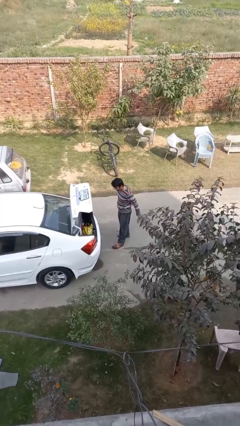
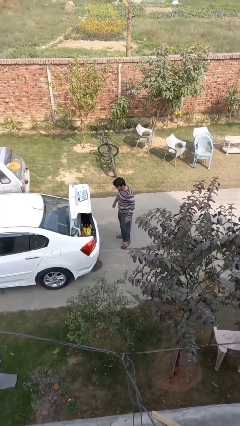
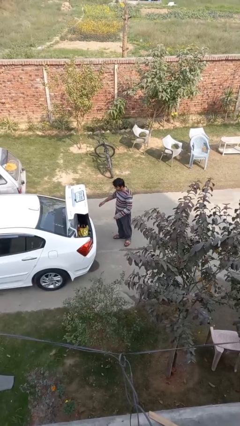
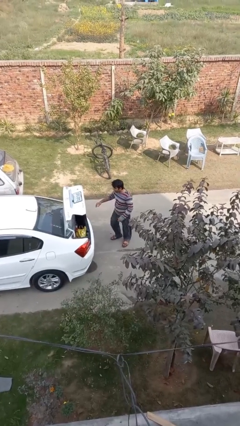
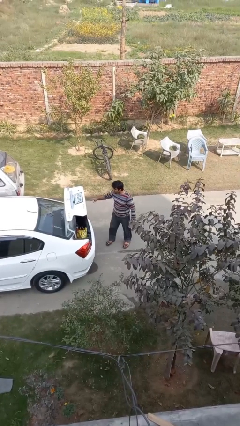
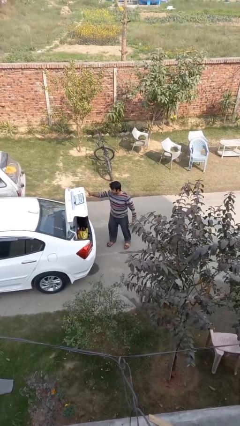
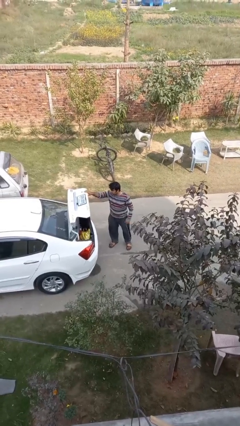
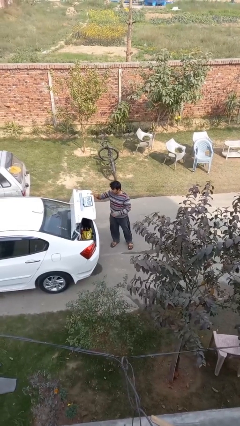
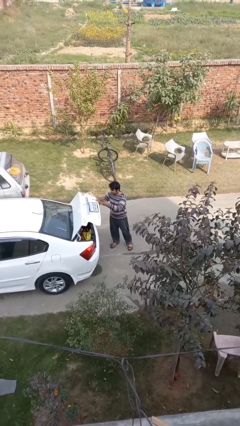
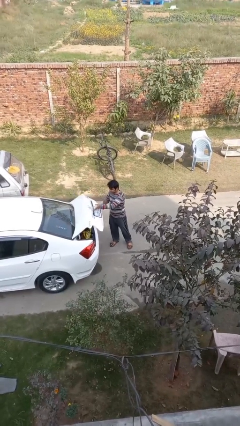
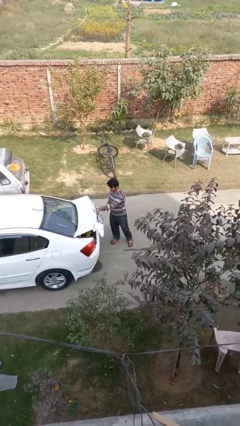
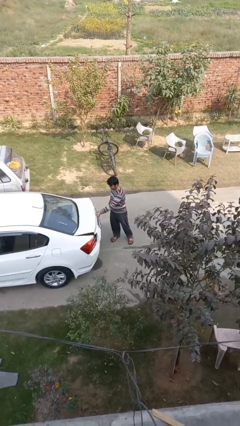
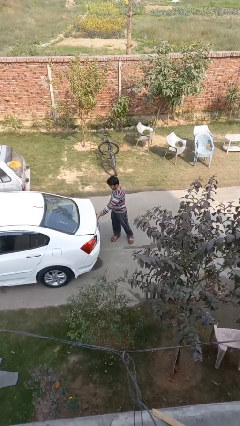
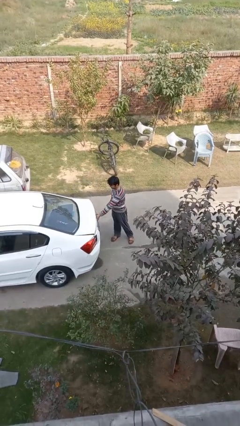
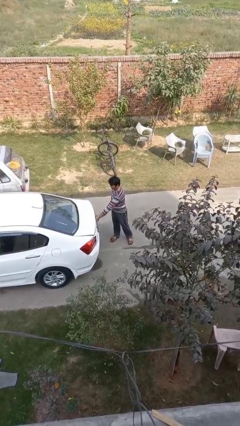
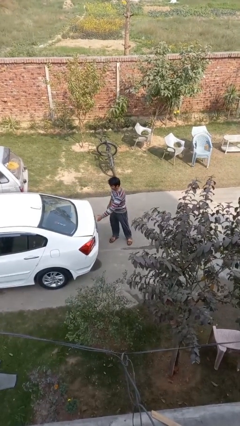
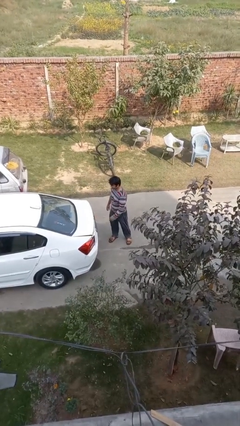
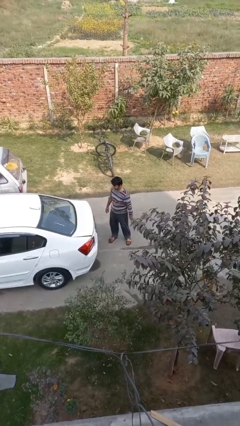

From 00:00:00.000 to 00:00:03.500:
person closes car trunk

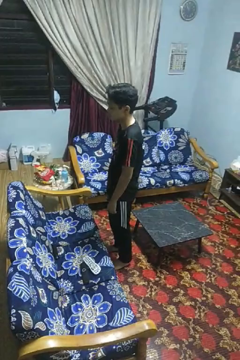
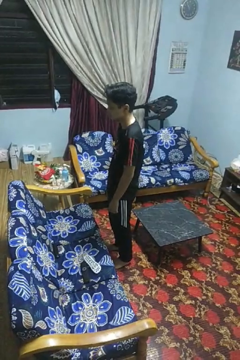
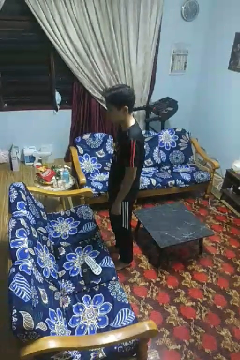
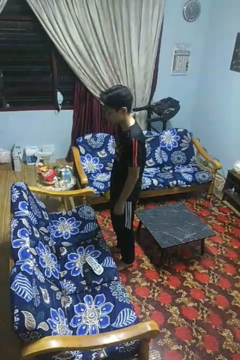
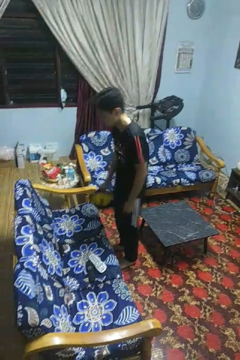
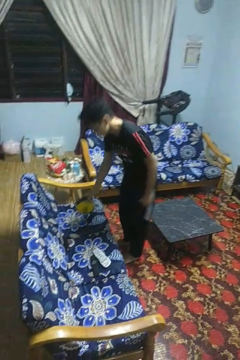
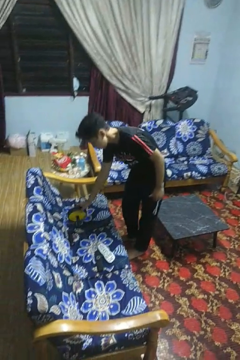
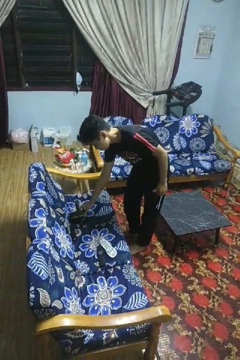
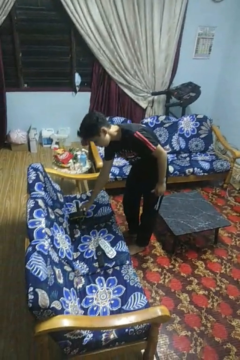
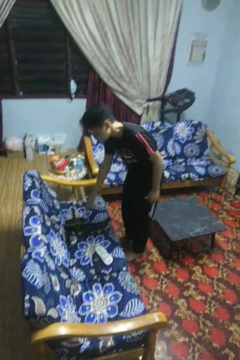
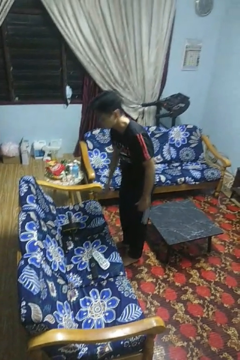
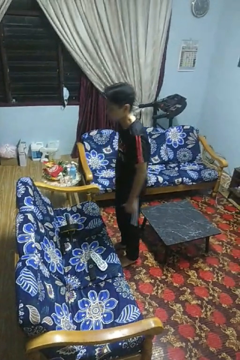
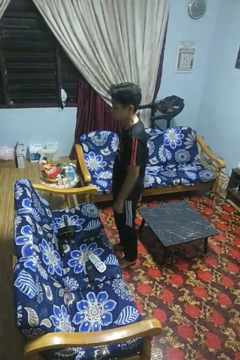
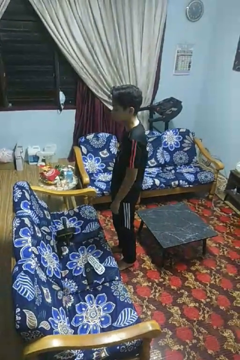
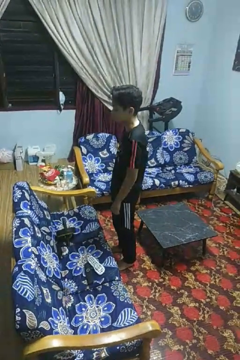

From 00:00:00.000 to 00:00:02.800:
person puts down object on couch

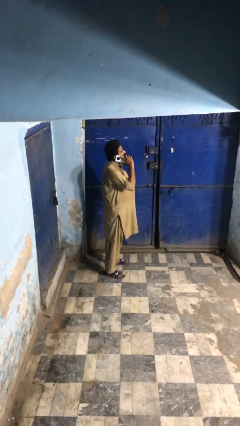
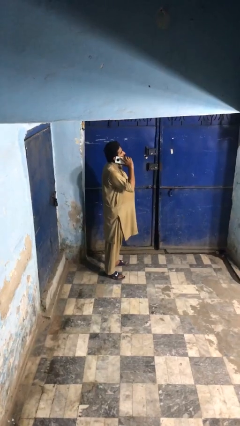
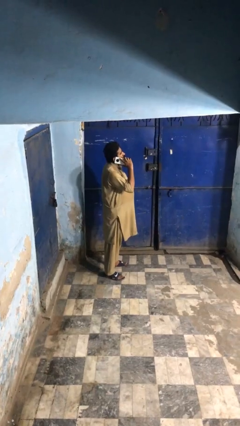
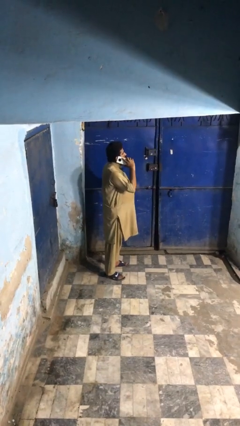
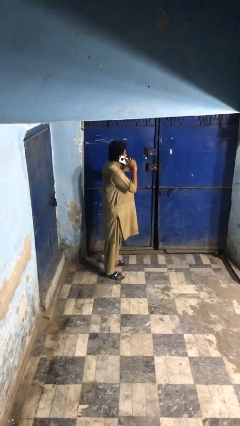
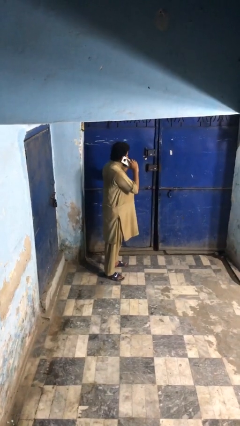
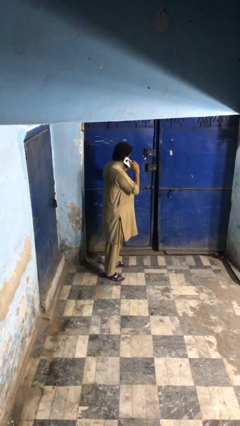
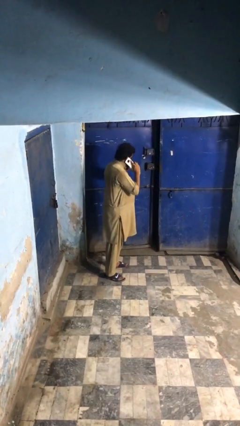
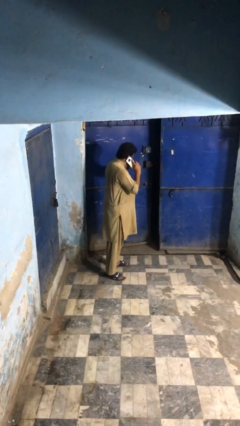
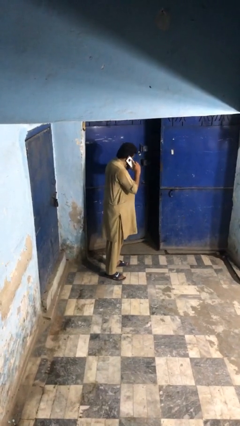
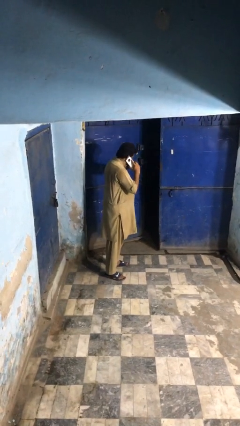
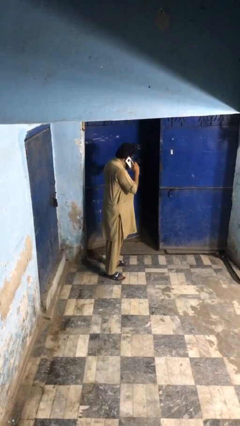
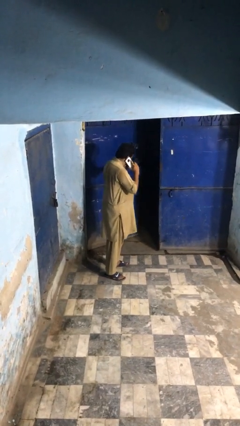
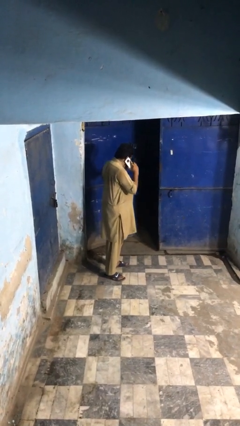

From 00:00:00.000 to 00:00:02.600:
person opens facility door

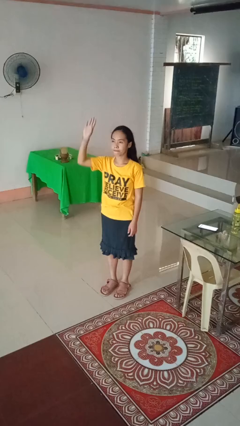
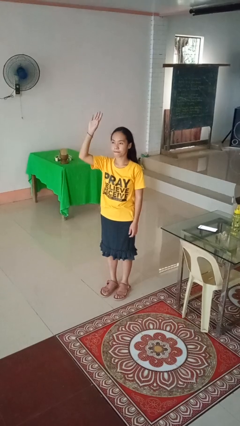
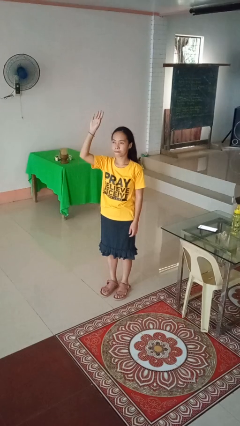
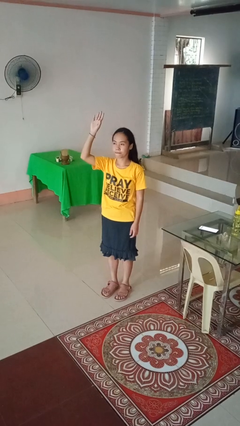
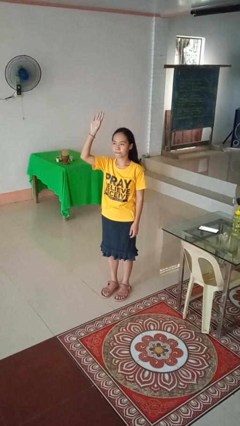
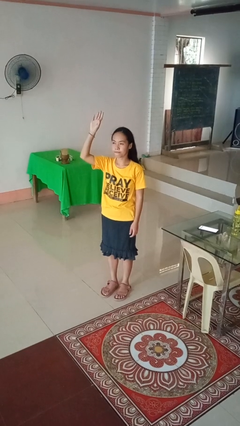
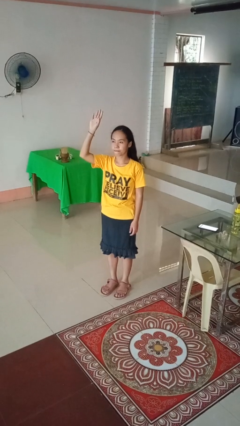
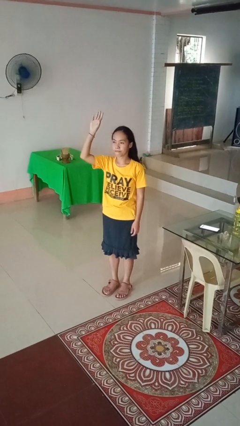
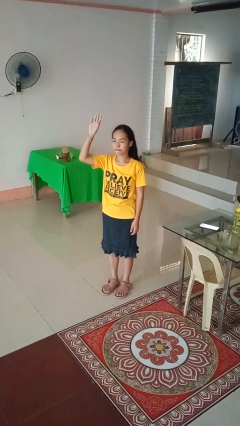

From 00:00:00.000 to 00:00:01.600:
person gestures raise hand

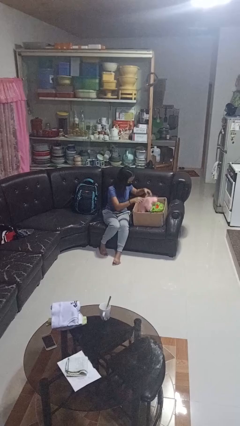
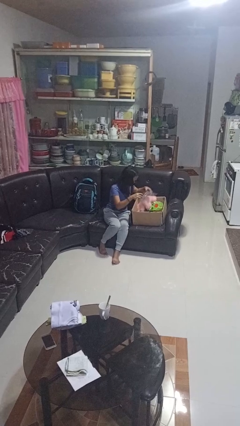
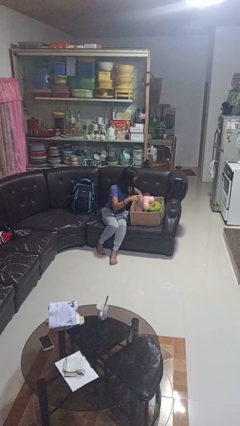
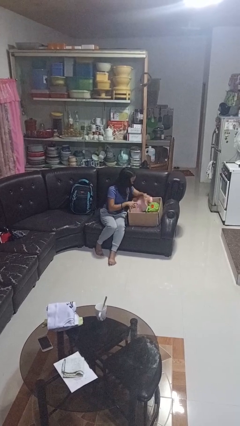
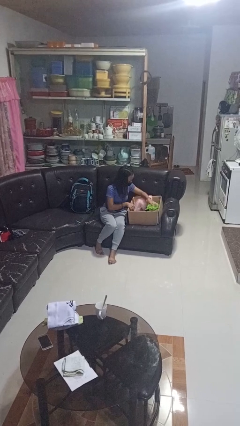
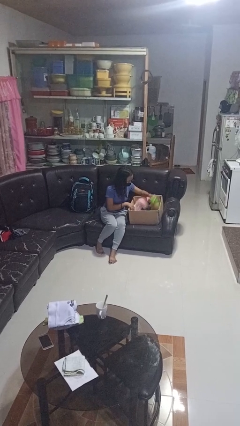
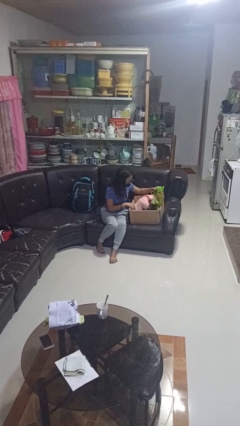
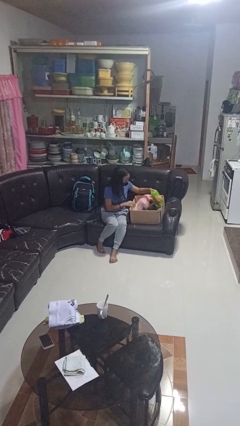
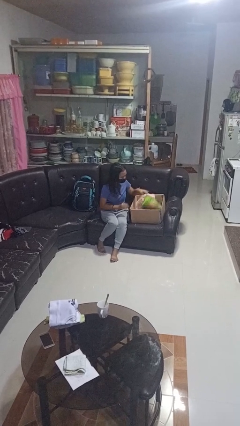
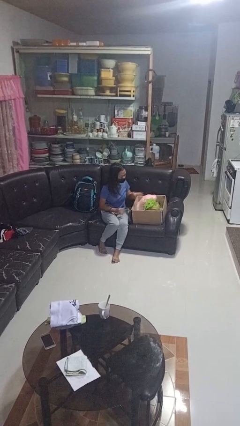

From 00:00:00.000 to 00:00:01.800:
person searches in box

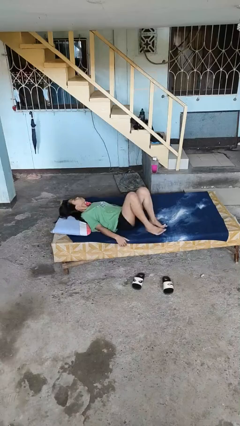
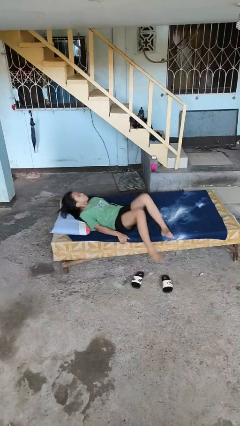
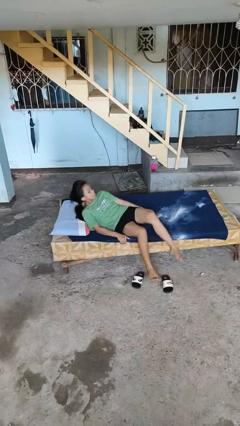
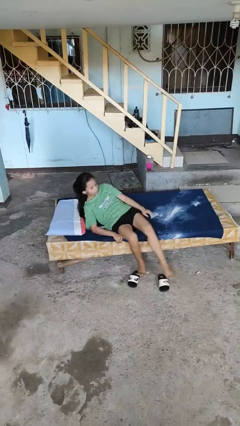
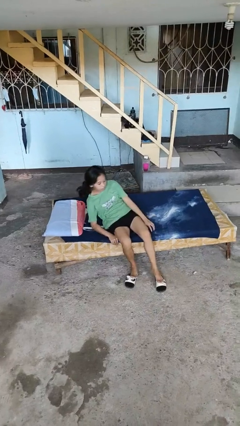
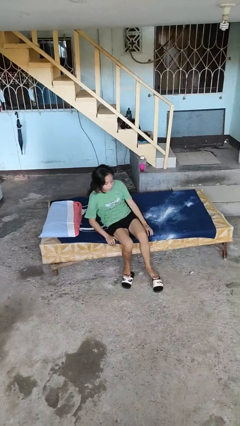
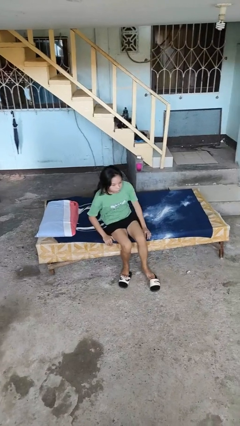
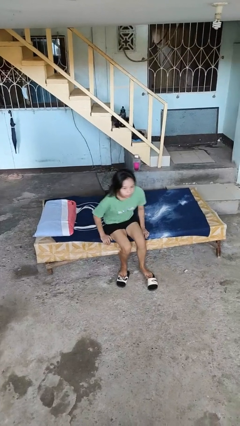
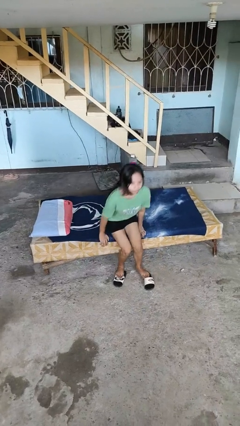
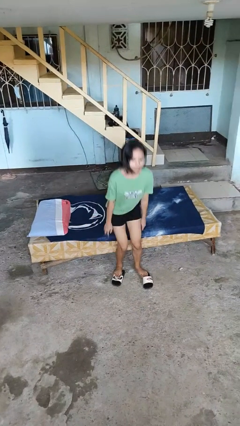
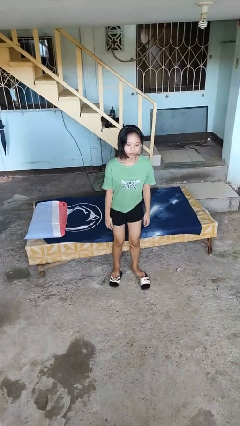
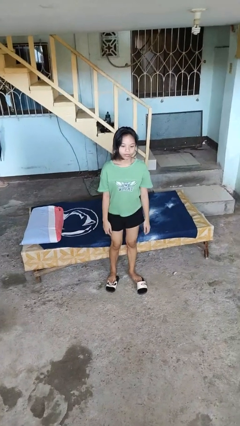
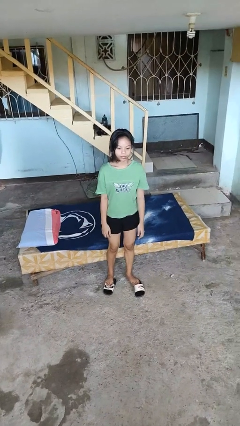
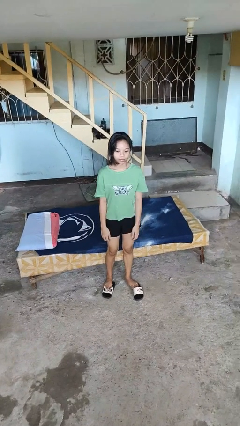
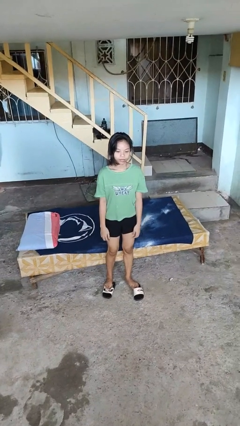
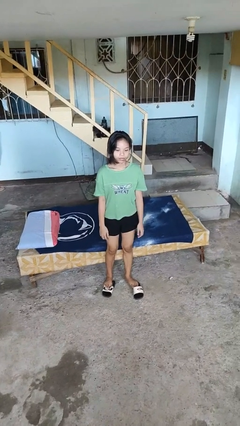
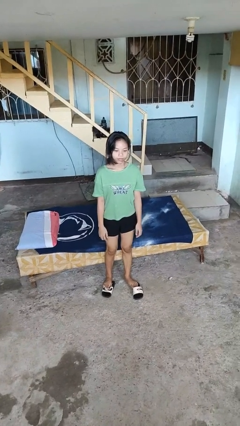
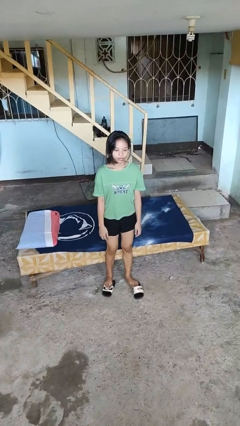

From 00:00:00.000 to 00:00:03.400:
person stands up

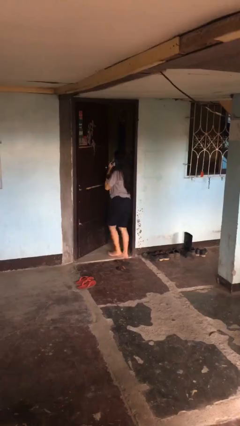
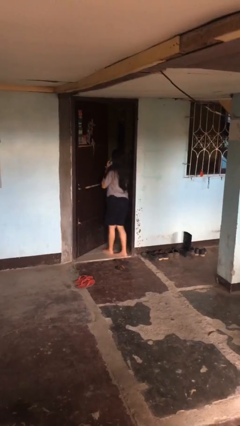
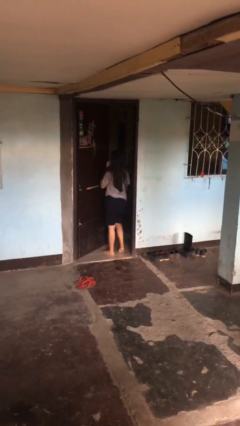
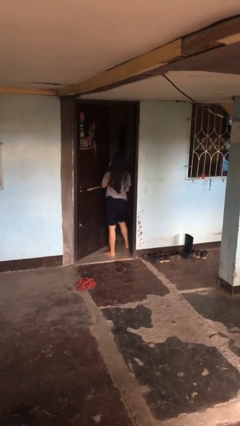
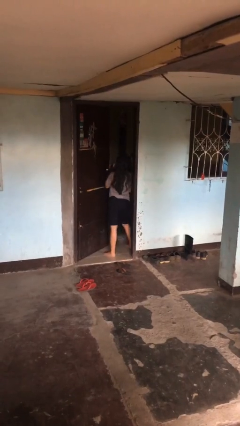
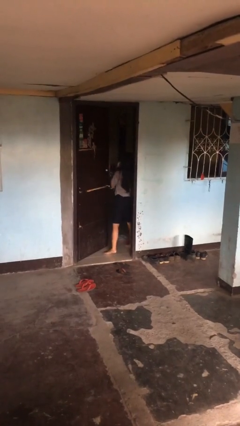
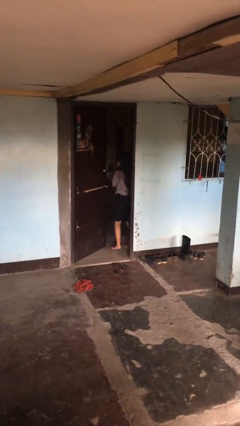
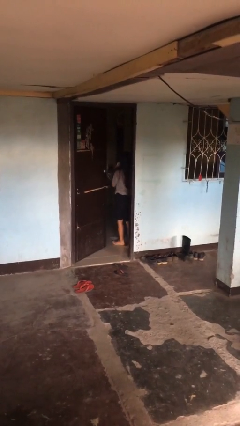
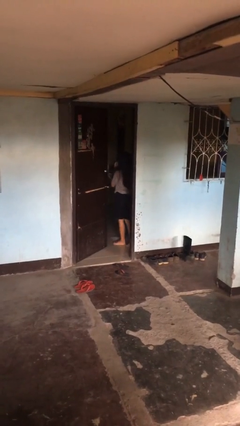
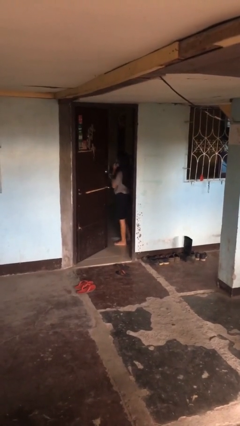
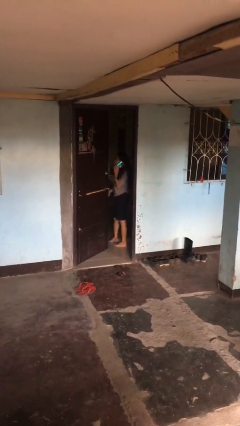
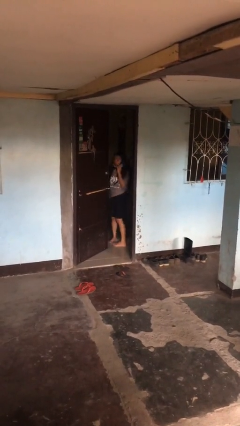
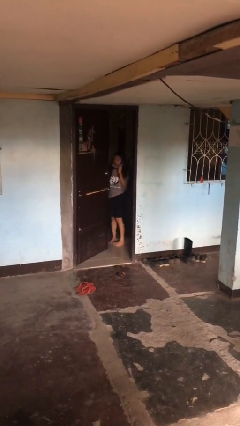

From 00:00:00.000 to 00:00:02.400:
person exits scene through structure
